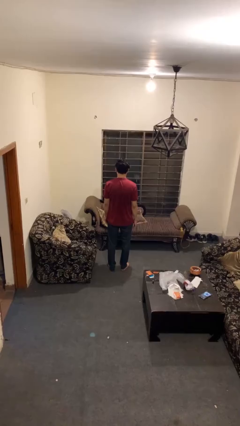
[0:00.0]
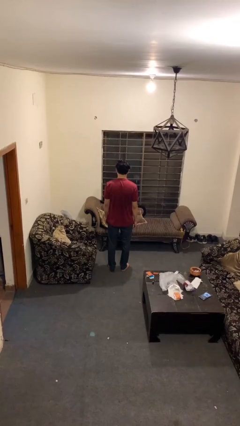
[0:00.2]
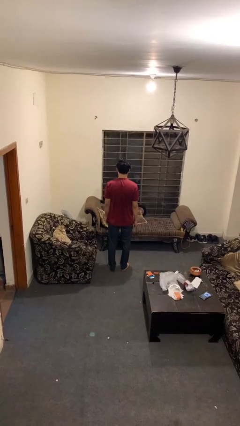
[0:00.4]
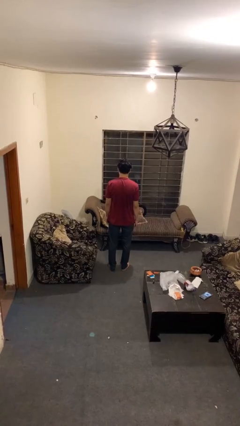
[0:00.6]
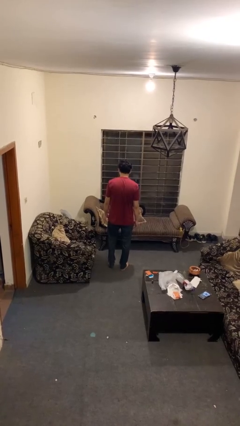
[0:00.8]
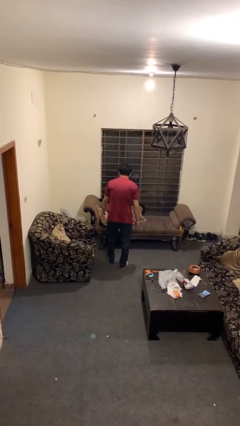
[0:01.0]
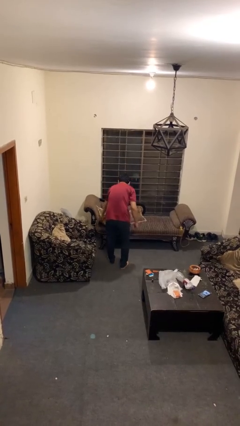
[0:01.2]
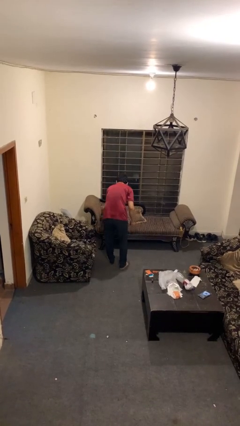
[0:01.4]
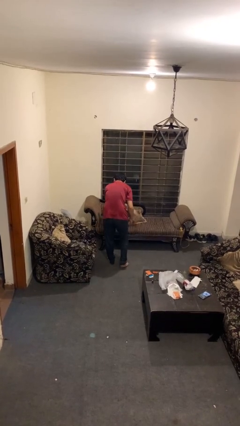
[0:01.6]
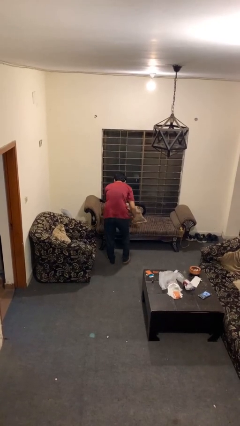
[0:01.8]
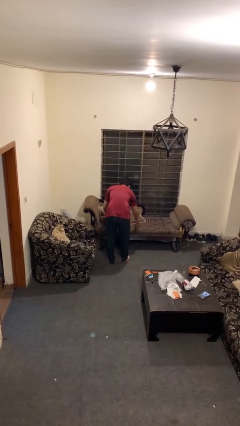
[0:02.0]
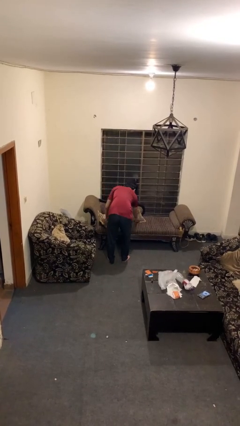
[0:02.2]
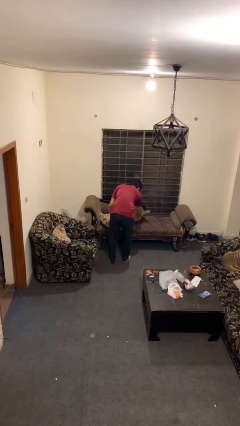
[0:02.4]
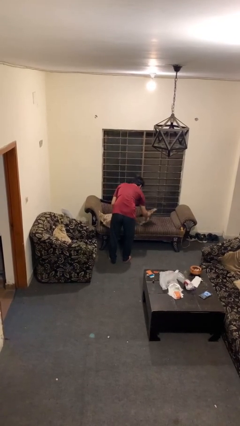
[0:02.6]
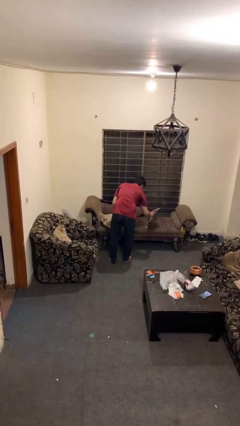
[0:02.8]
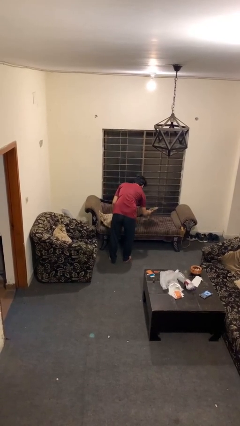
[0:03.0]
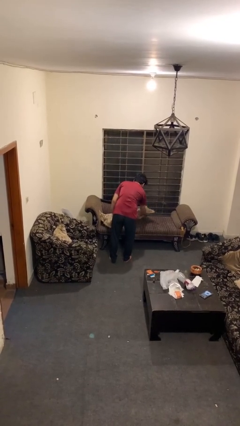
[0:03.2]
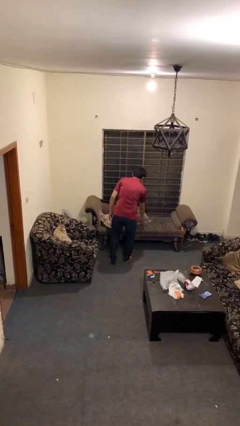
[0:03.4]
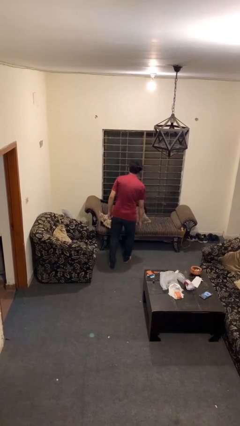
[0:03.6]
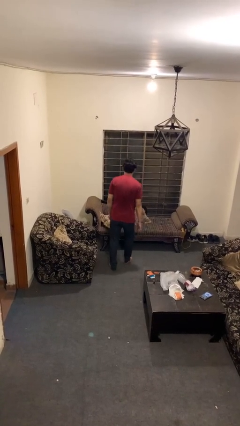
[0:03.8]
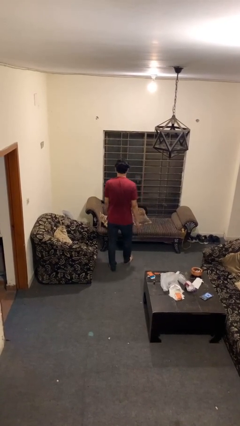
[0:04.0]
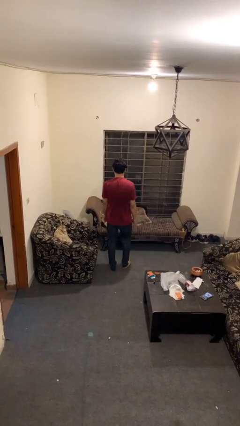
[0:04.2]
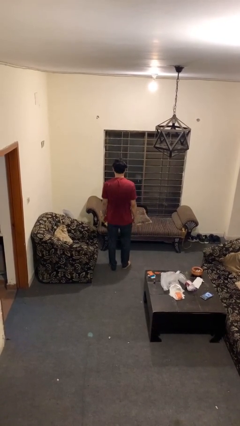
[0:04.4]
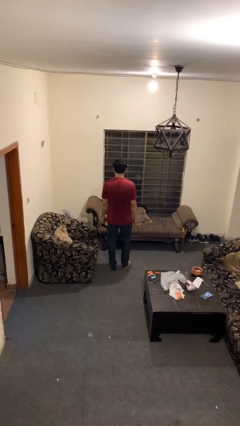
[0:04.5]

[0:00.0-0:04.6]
person searches in couch

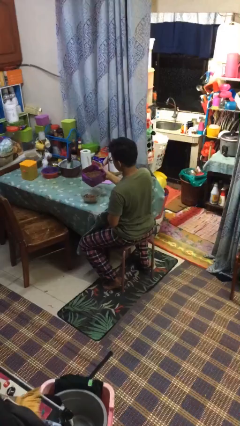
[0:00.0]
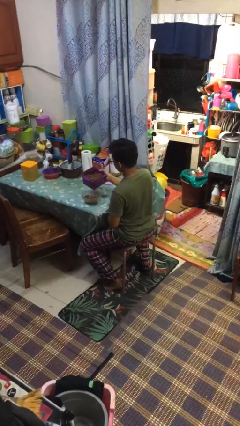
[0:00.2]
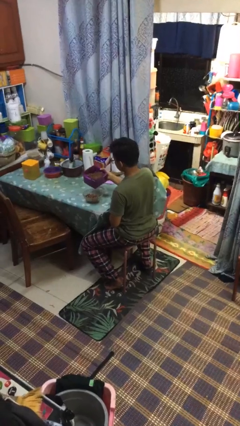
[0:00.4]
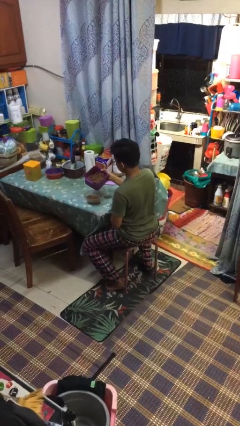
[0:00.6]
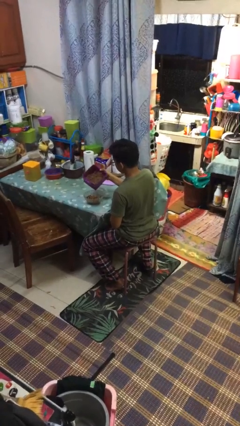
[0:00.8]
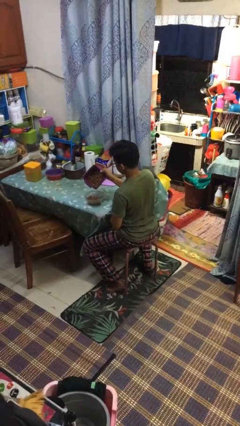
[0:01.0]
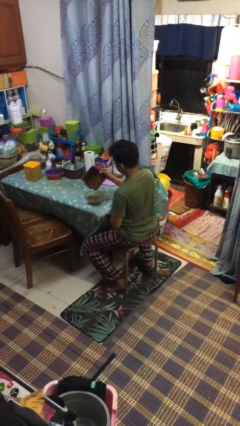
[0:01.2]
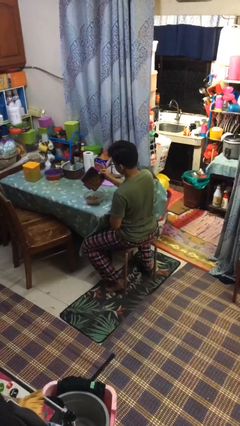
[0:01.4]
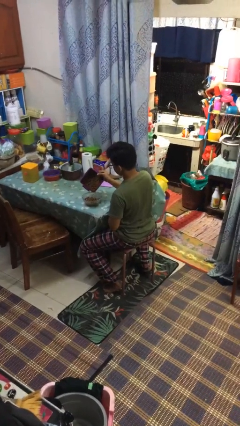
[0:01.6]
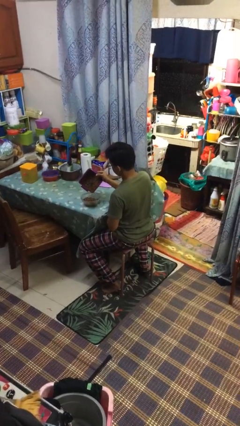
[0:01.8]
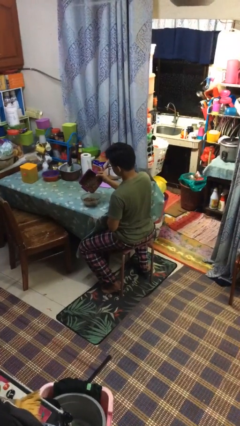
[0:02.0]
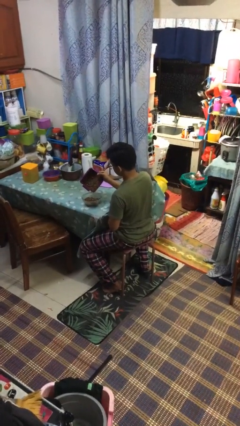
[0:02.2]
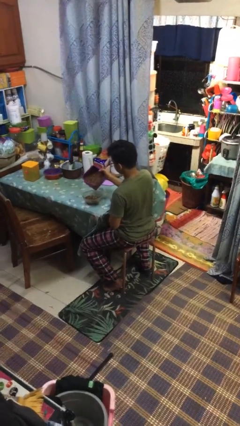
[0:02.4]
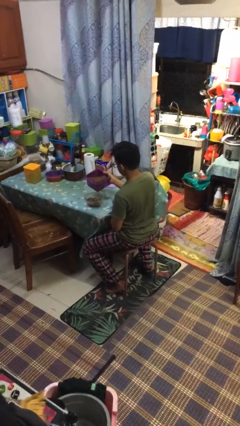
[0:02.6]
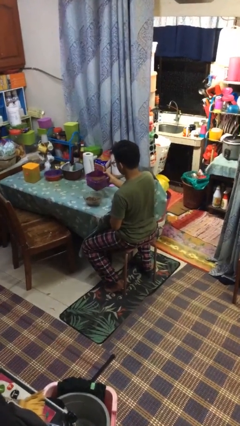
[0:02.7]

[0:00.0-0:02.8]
person pours into bowl

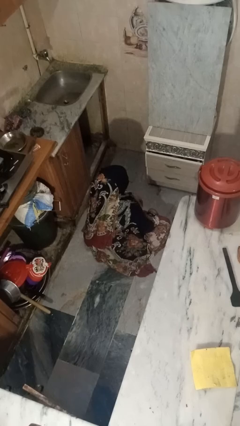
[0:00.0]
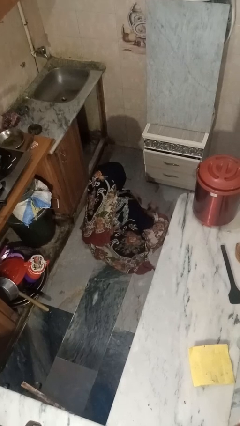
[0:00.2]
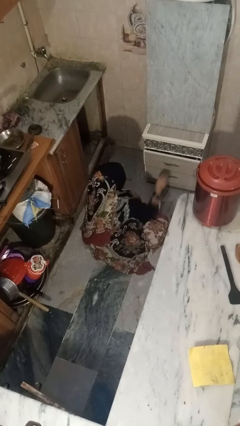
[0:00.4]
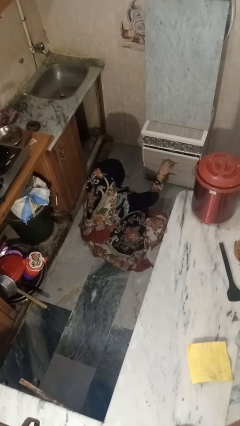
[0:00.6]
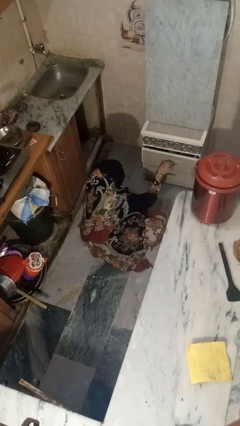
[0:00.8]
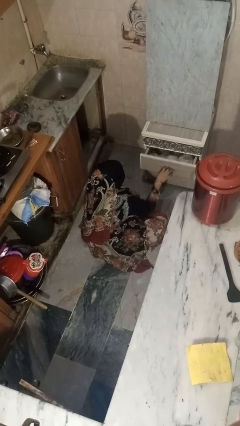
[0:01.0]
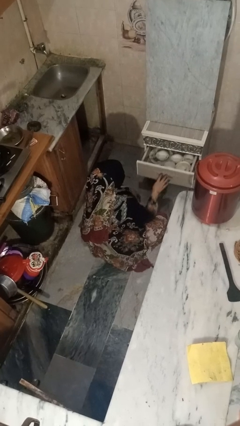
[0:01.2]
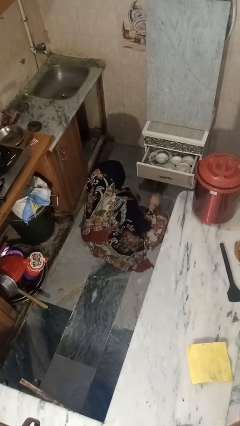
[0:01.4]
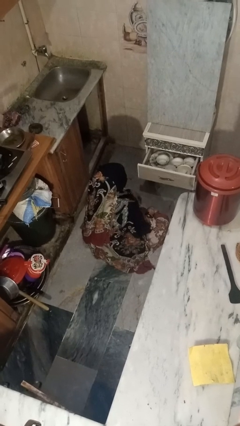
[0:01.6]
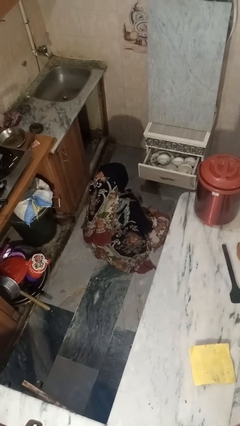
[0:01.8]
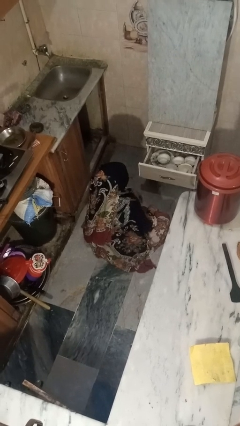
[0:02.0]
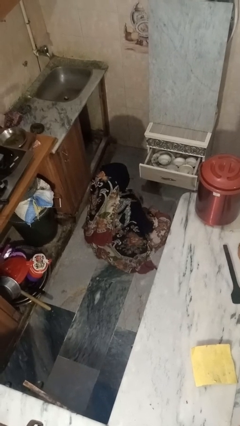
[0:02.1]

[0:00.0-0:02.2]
person opens kitchen drawer

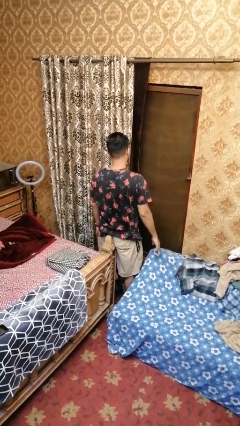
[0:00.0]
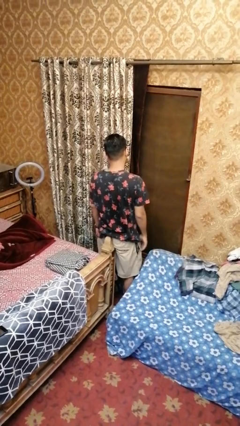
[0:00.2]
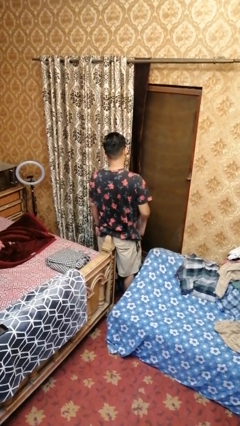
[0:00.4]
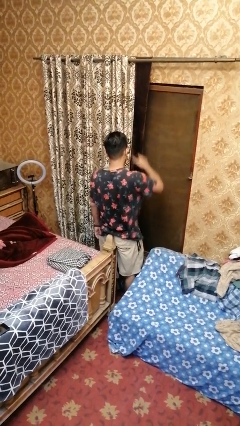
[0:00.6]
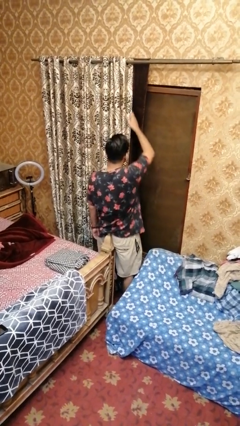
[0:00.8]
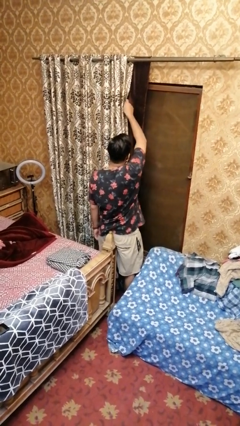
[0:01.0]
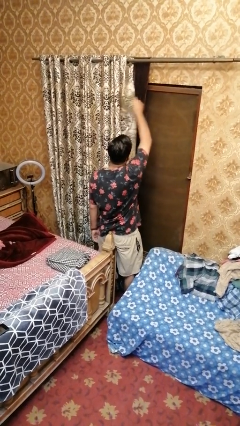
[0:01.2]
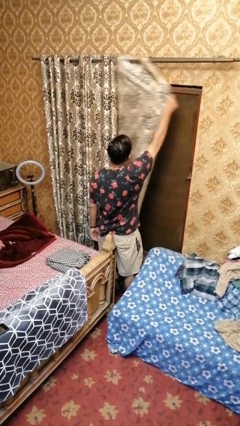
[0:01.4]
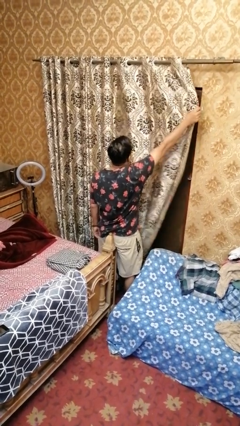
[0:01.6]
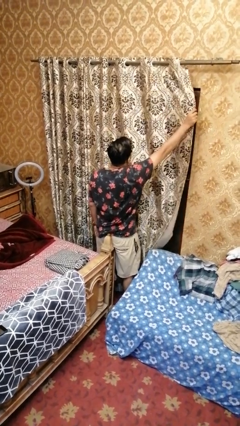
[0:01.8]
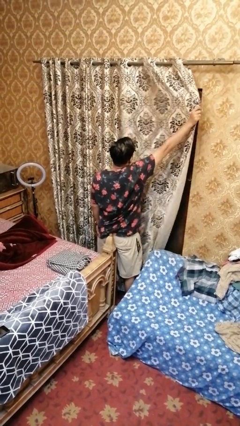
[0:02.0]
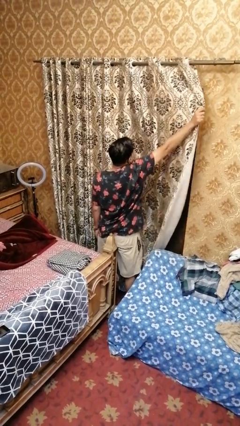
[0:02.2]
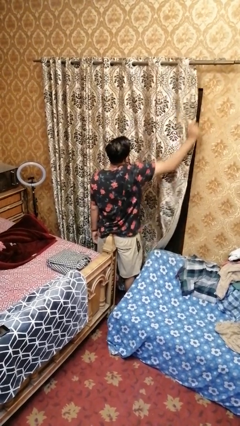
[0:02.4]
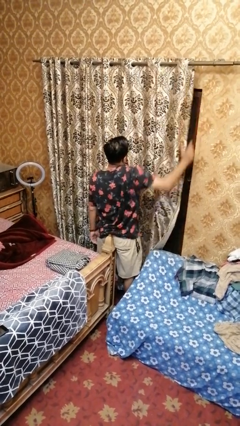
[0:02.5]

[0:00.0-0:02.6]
person closes curtains

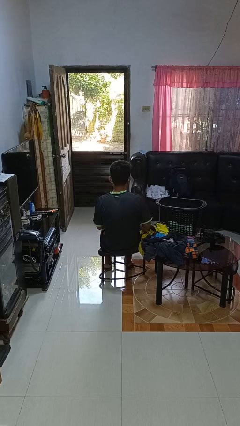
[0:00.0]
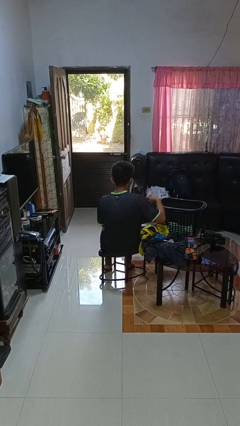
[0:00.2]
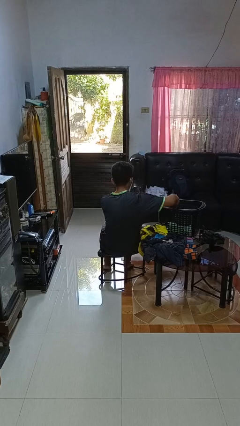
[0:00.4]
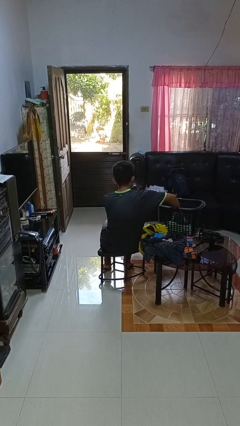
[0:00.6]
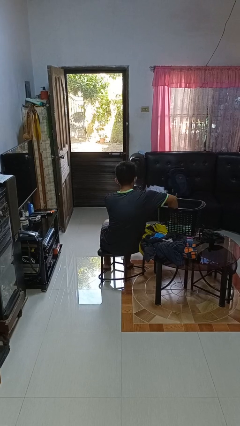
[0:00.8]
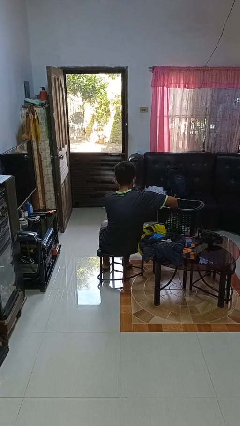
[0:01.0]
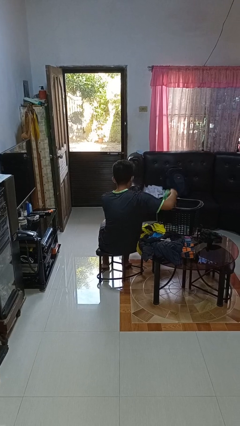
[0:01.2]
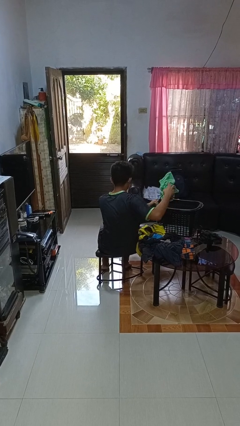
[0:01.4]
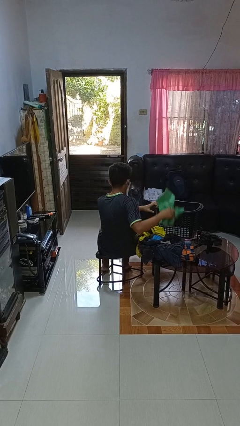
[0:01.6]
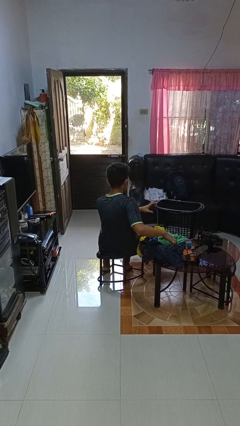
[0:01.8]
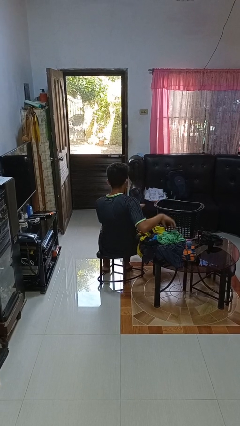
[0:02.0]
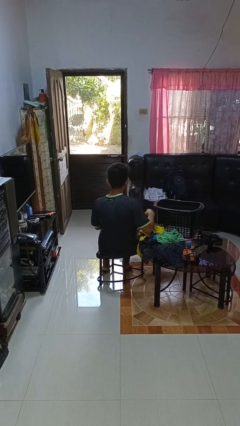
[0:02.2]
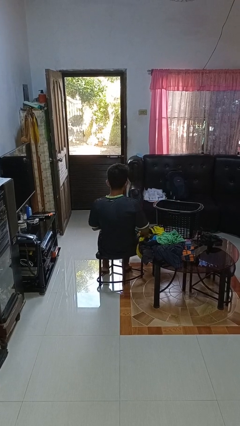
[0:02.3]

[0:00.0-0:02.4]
person takes object from basket

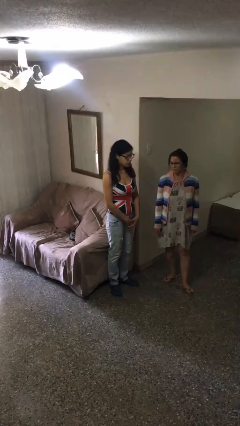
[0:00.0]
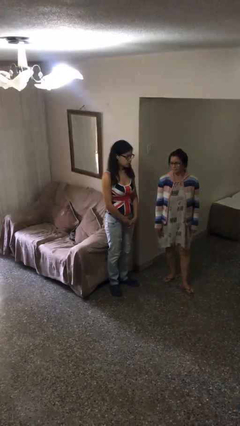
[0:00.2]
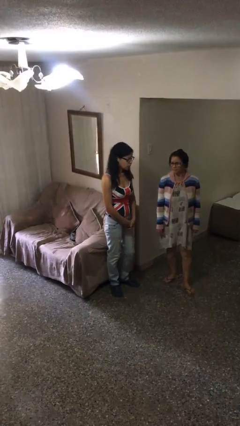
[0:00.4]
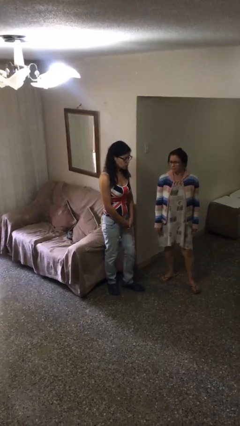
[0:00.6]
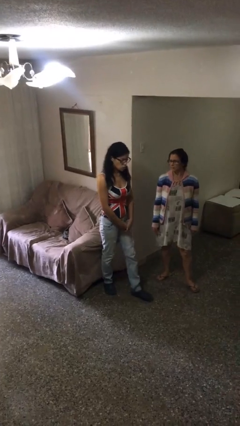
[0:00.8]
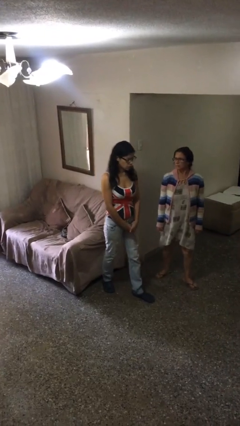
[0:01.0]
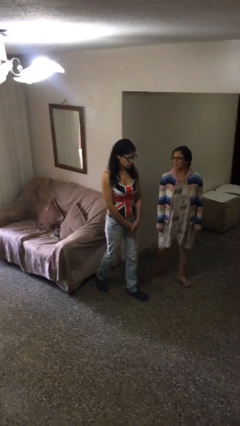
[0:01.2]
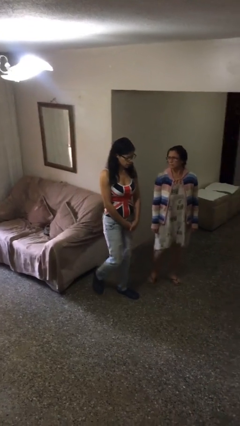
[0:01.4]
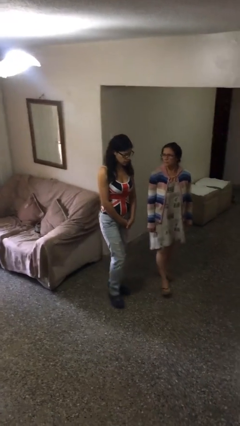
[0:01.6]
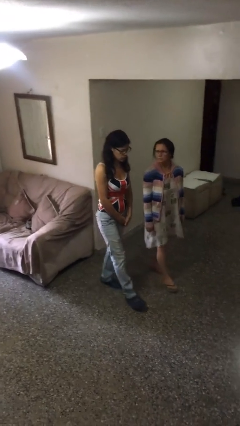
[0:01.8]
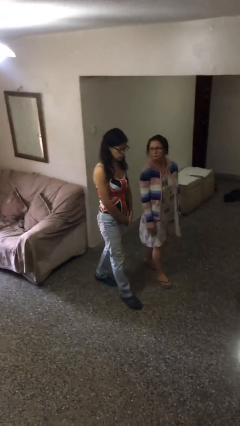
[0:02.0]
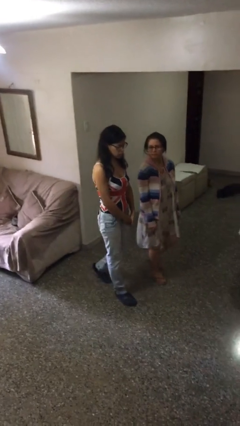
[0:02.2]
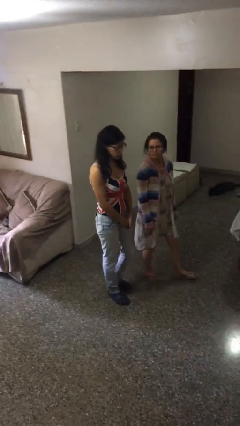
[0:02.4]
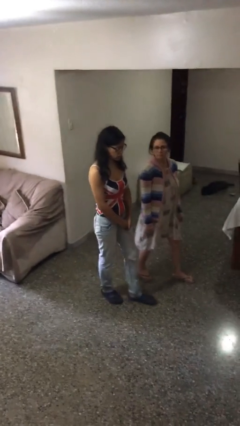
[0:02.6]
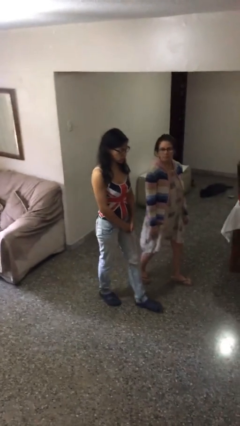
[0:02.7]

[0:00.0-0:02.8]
person talks to person
